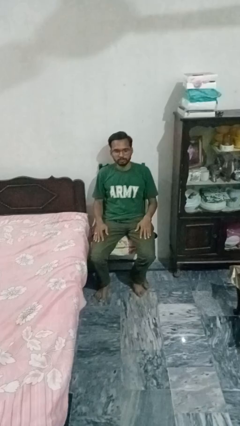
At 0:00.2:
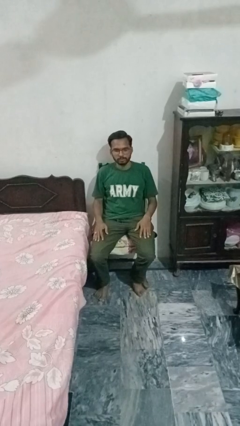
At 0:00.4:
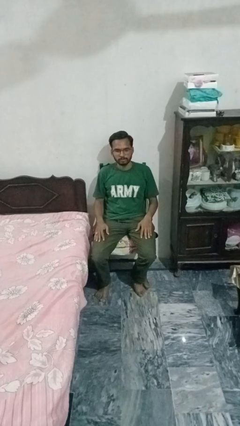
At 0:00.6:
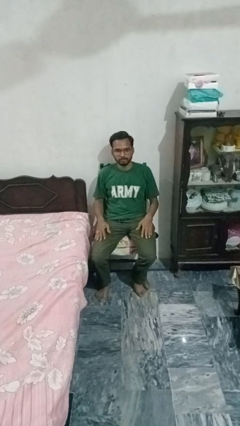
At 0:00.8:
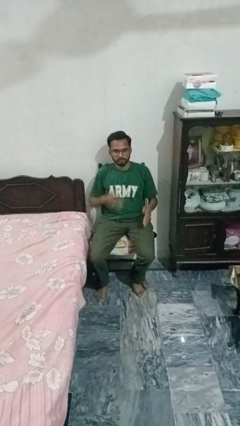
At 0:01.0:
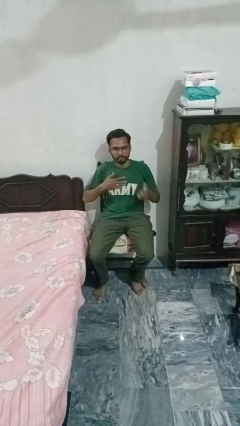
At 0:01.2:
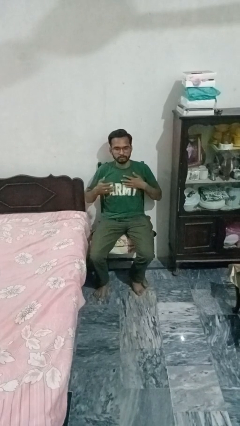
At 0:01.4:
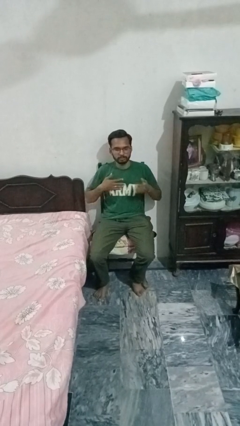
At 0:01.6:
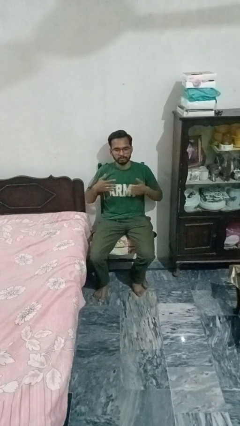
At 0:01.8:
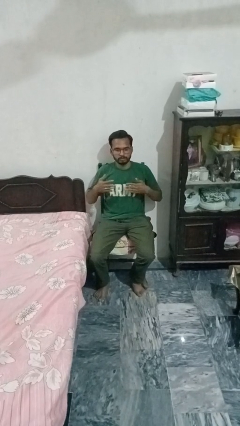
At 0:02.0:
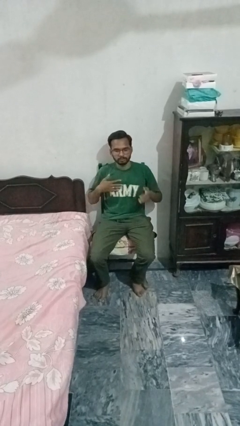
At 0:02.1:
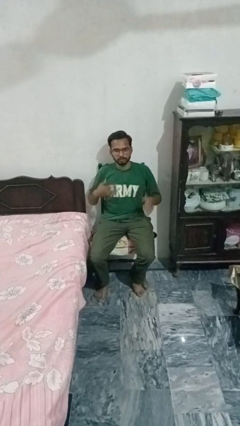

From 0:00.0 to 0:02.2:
person drums on chest

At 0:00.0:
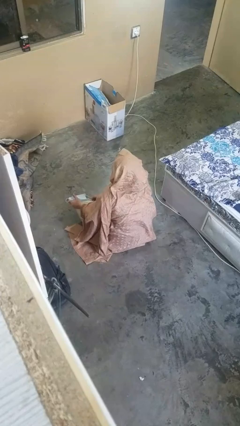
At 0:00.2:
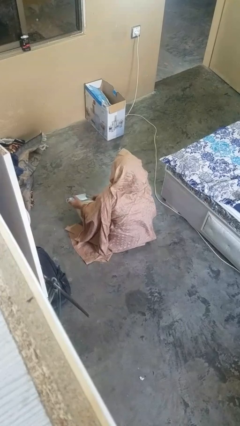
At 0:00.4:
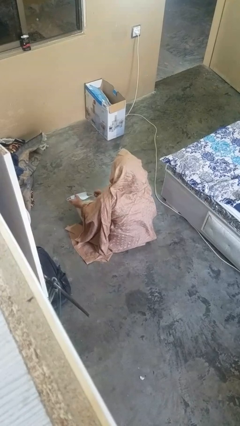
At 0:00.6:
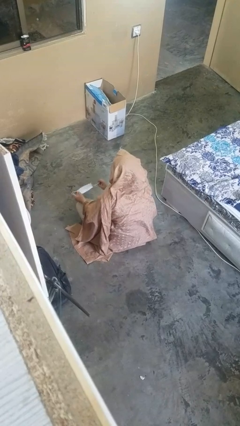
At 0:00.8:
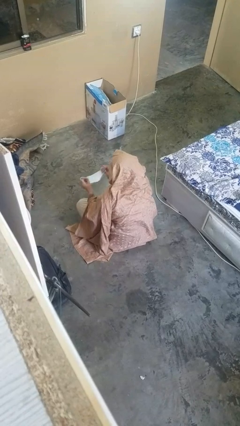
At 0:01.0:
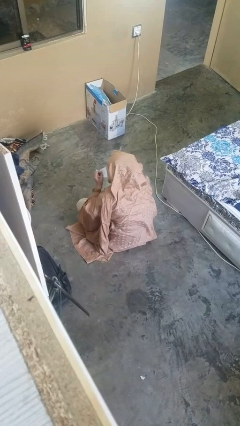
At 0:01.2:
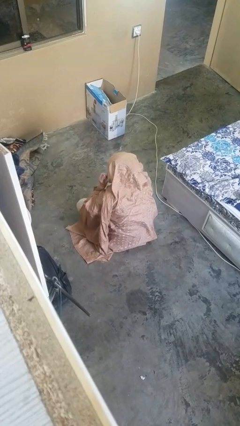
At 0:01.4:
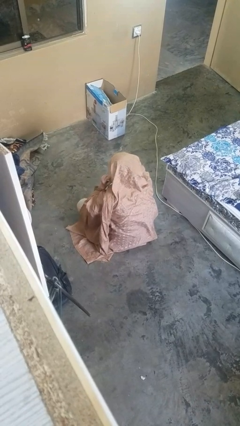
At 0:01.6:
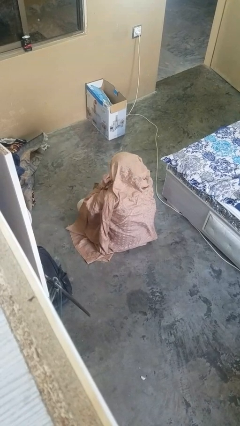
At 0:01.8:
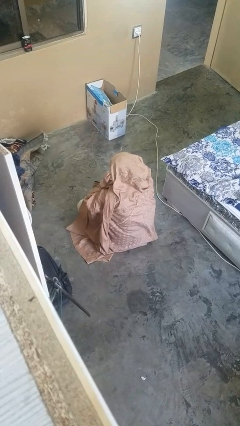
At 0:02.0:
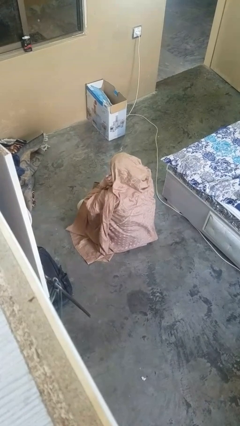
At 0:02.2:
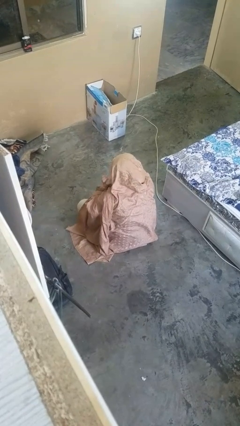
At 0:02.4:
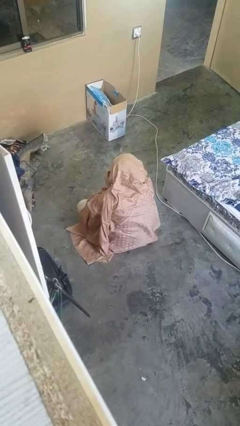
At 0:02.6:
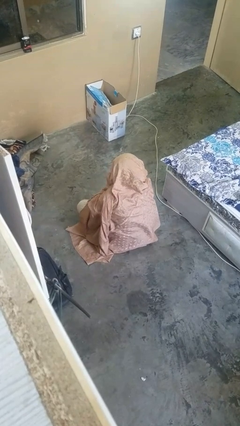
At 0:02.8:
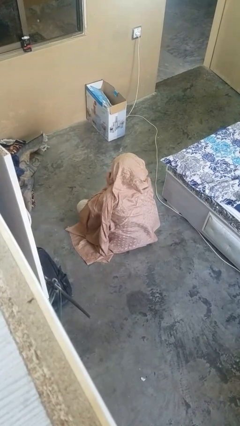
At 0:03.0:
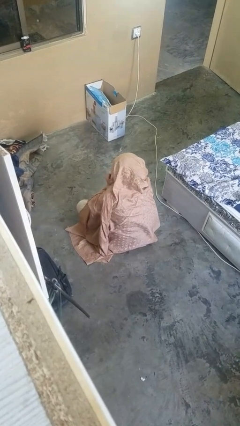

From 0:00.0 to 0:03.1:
person puts on facemask

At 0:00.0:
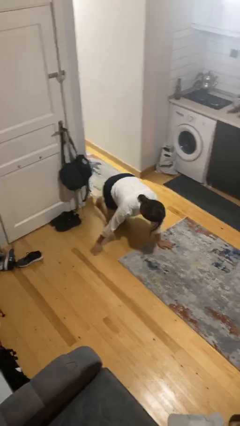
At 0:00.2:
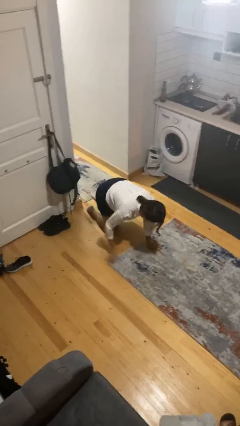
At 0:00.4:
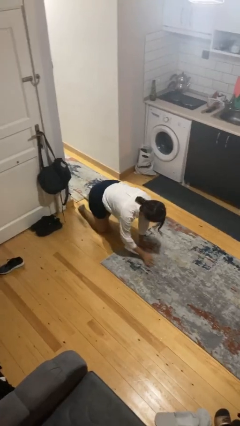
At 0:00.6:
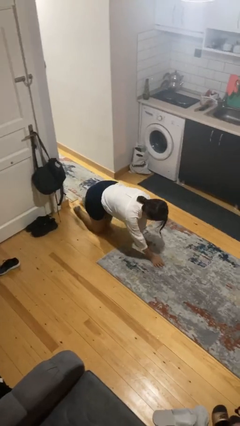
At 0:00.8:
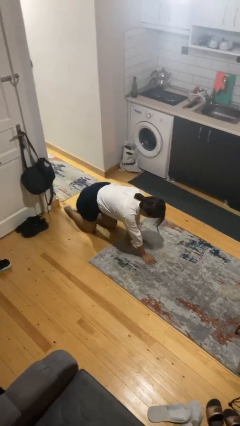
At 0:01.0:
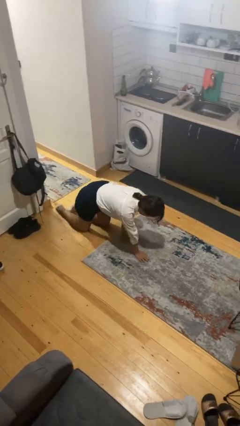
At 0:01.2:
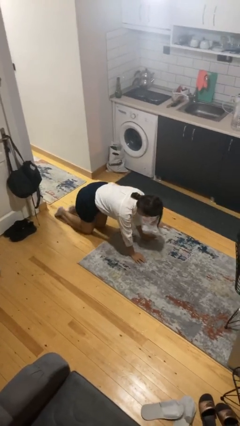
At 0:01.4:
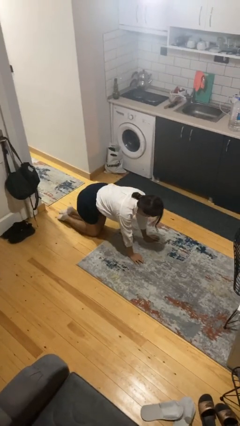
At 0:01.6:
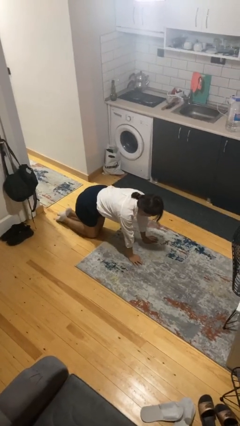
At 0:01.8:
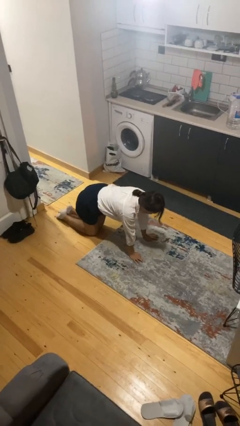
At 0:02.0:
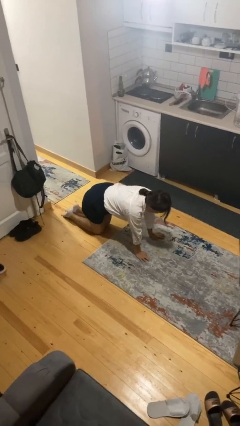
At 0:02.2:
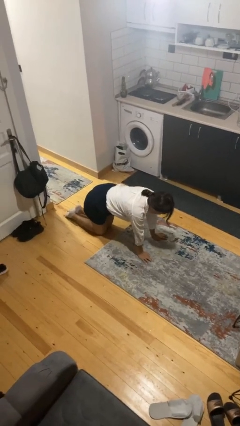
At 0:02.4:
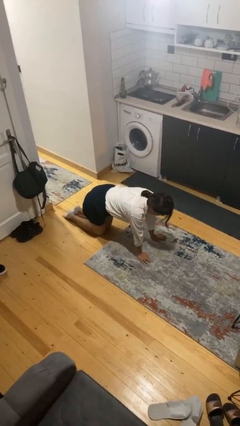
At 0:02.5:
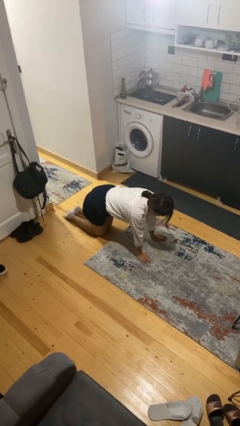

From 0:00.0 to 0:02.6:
person crawls

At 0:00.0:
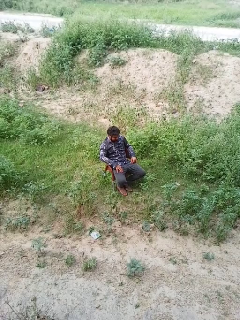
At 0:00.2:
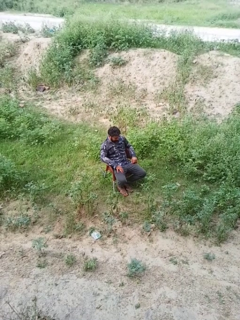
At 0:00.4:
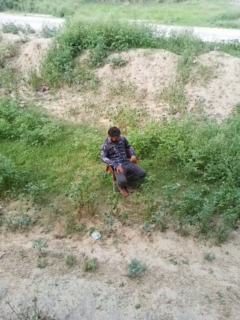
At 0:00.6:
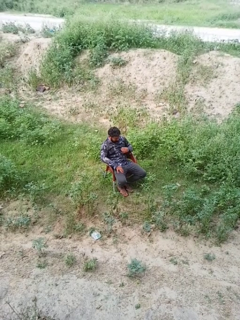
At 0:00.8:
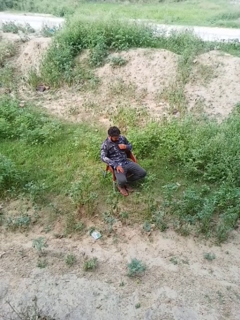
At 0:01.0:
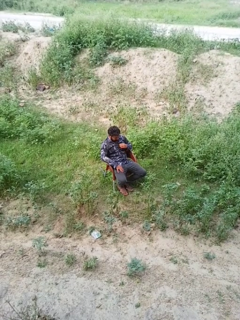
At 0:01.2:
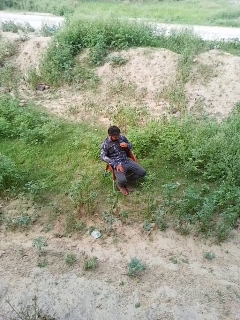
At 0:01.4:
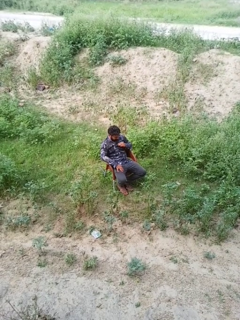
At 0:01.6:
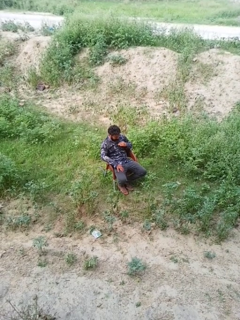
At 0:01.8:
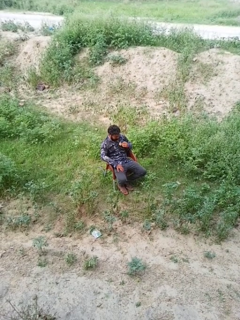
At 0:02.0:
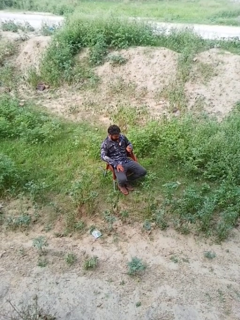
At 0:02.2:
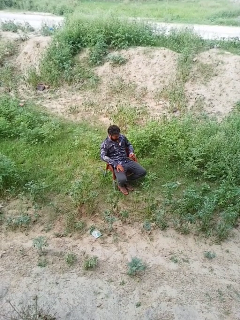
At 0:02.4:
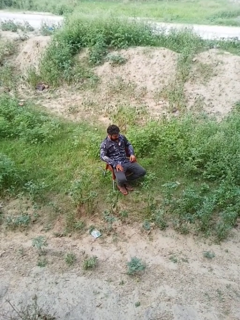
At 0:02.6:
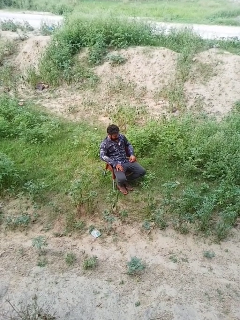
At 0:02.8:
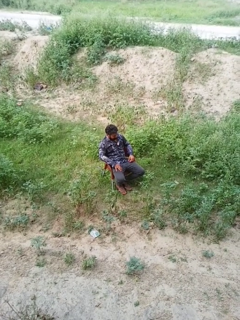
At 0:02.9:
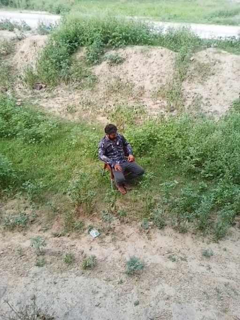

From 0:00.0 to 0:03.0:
person unbuttons shirt

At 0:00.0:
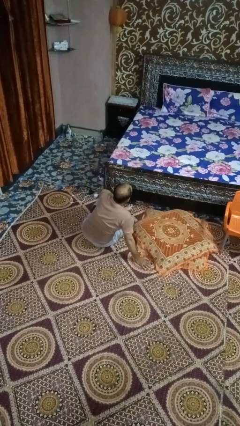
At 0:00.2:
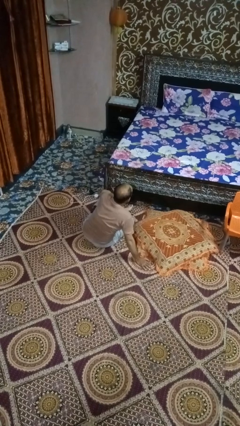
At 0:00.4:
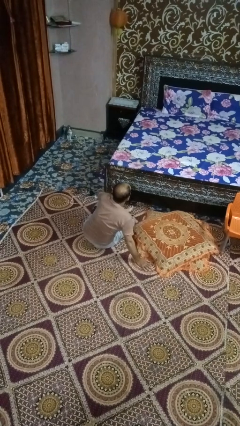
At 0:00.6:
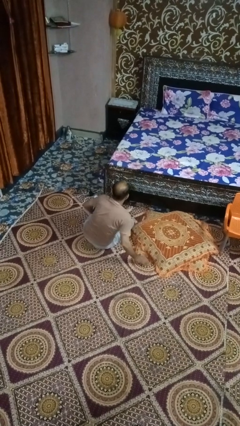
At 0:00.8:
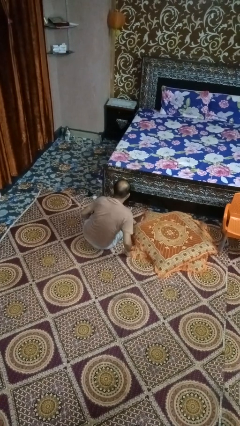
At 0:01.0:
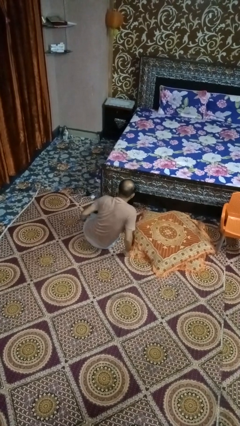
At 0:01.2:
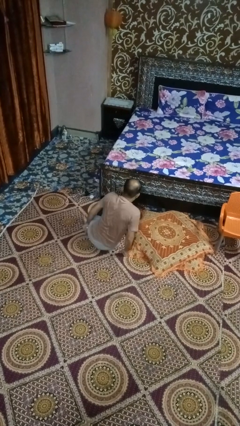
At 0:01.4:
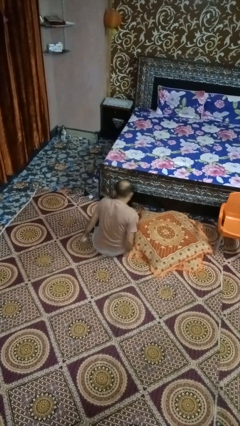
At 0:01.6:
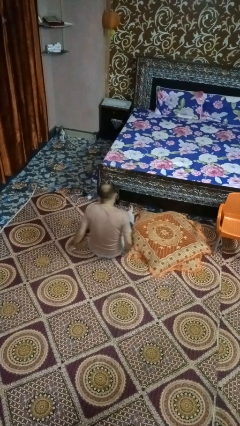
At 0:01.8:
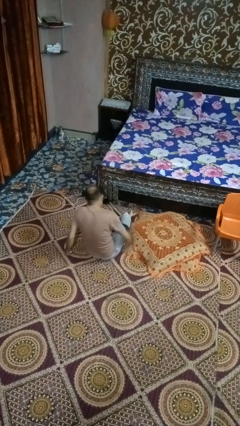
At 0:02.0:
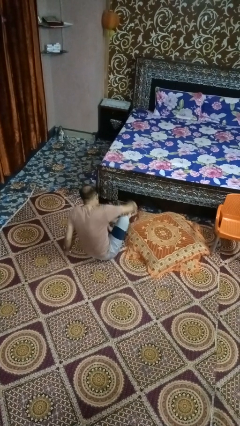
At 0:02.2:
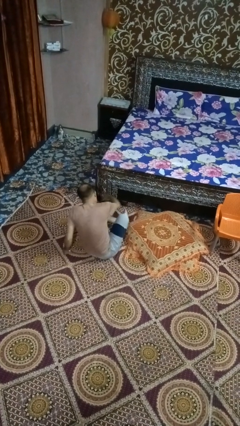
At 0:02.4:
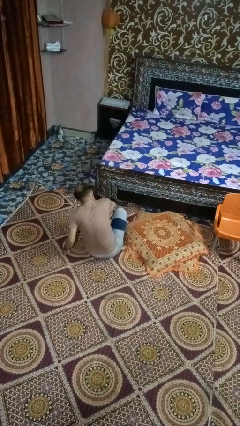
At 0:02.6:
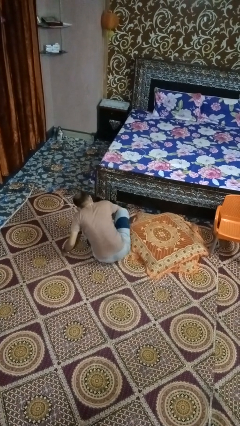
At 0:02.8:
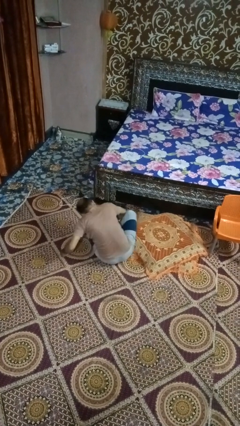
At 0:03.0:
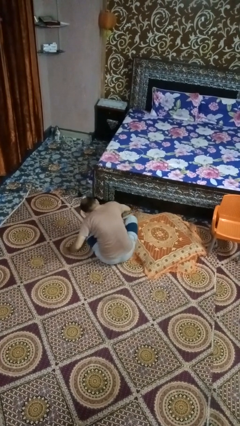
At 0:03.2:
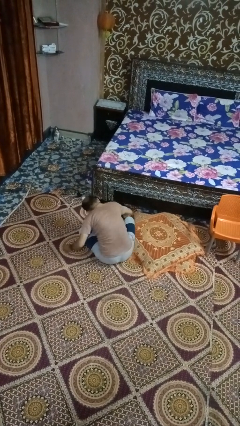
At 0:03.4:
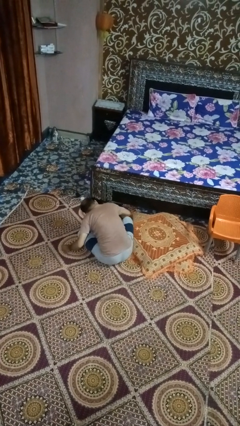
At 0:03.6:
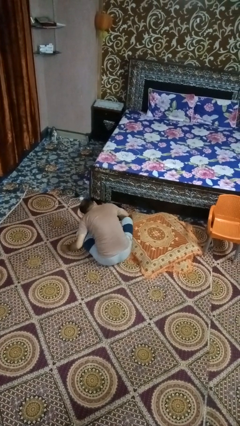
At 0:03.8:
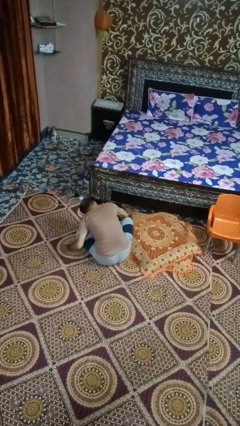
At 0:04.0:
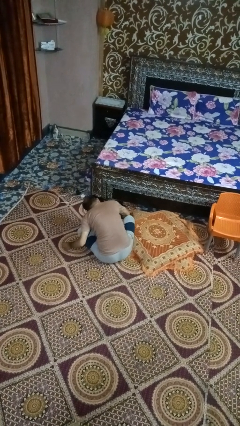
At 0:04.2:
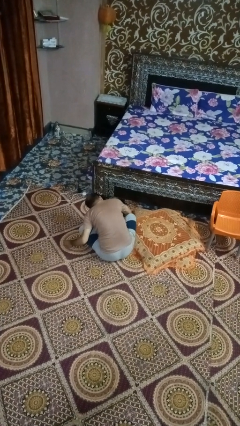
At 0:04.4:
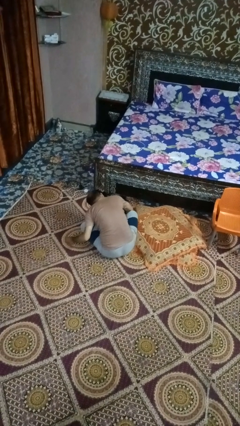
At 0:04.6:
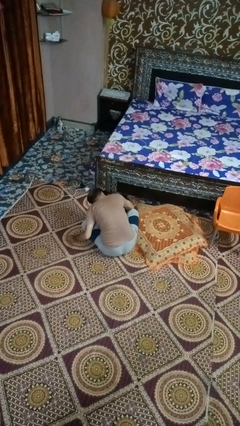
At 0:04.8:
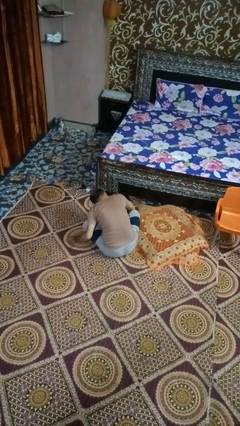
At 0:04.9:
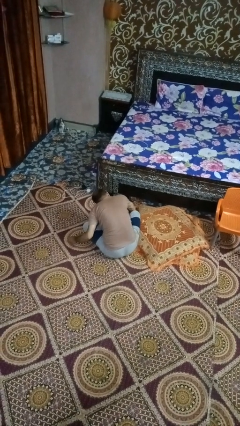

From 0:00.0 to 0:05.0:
person searches under bed

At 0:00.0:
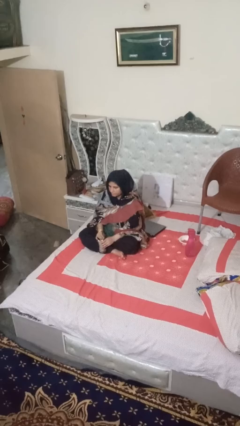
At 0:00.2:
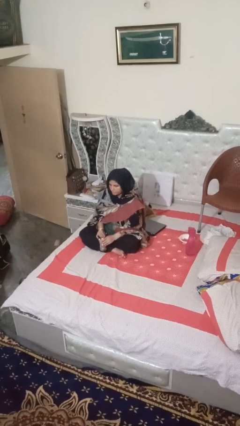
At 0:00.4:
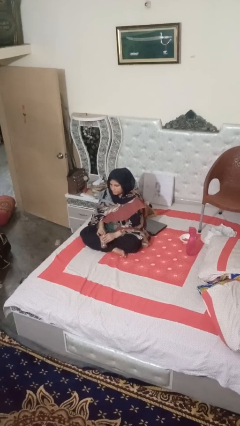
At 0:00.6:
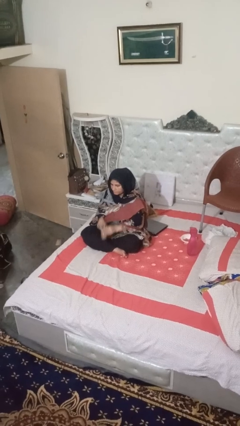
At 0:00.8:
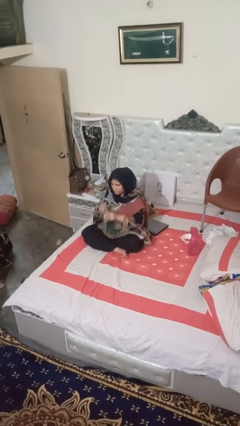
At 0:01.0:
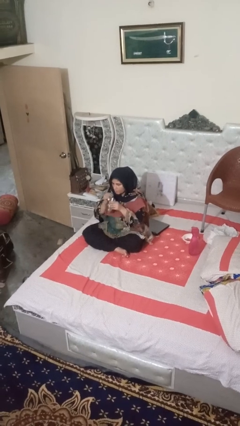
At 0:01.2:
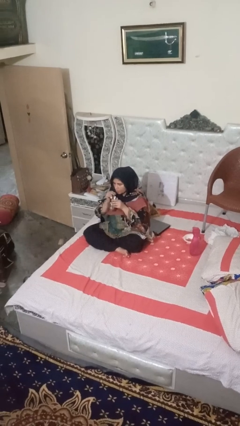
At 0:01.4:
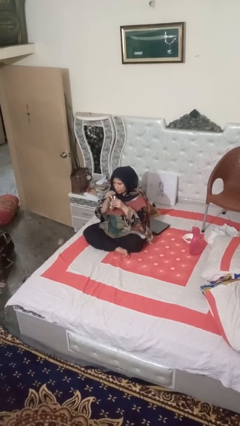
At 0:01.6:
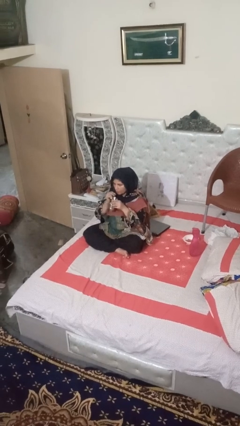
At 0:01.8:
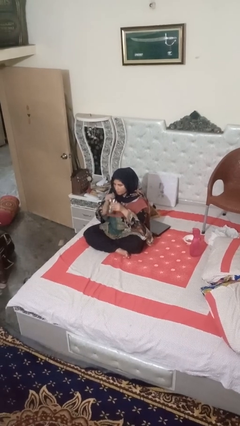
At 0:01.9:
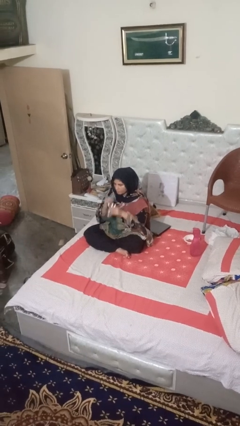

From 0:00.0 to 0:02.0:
person drinks from straw

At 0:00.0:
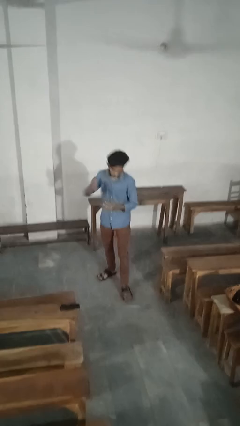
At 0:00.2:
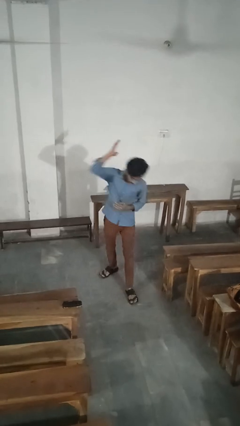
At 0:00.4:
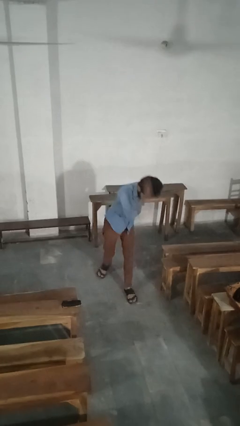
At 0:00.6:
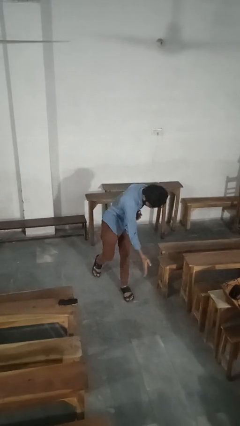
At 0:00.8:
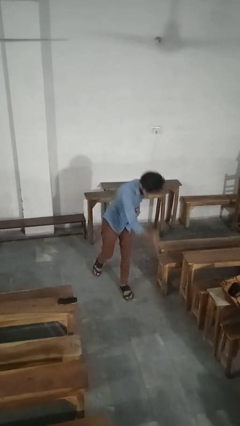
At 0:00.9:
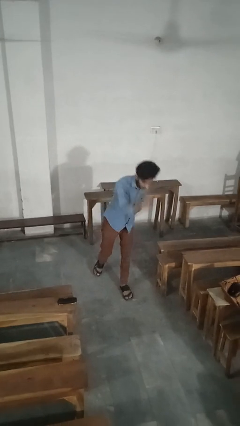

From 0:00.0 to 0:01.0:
person karate chop
